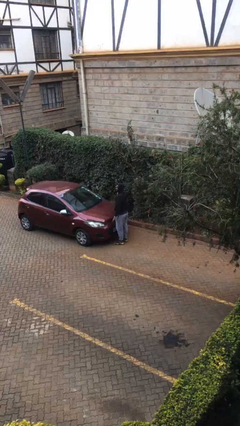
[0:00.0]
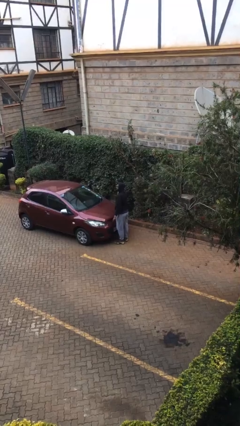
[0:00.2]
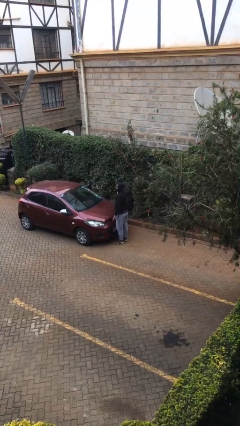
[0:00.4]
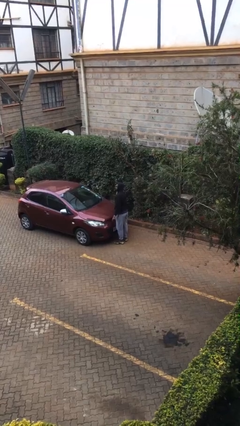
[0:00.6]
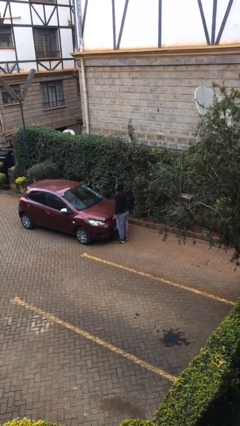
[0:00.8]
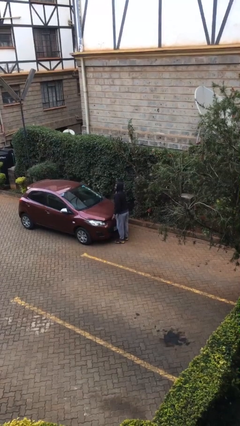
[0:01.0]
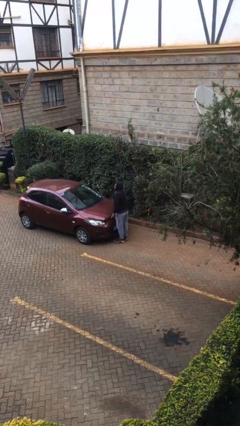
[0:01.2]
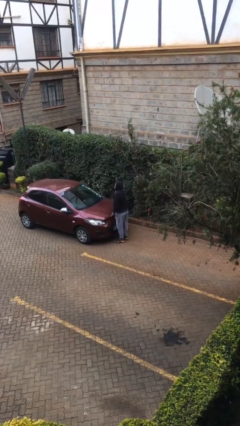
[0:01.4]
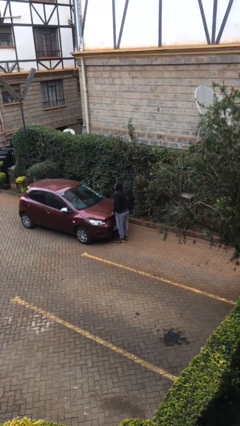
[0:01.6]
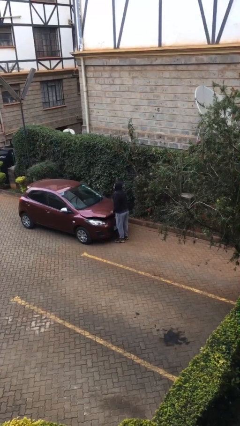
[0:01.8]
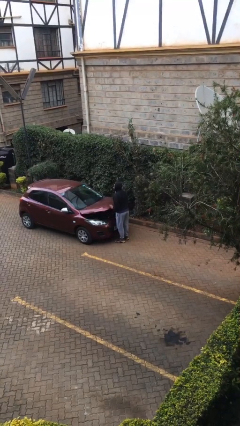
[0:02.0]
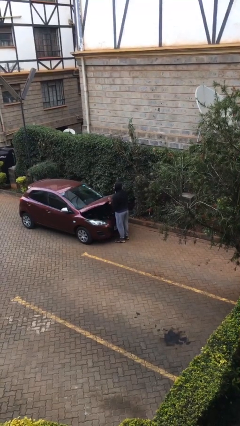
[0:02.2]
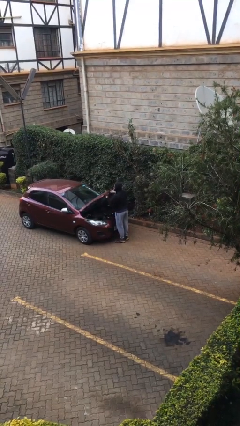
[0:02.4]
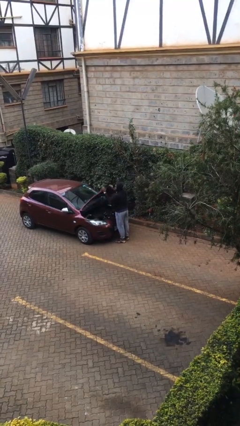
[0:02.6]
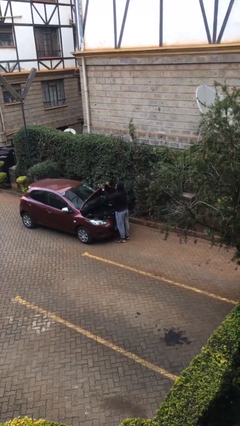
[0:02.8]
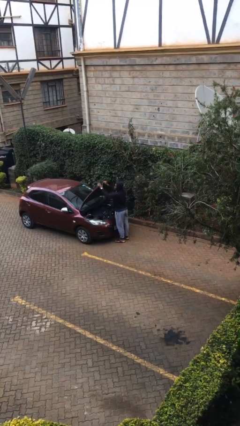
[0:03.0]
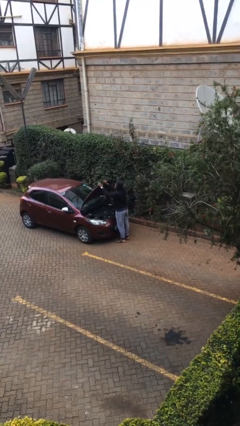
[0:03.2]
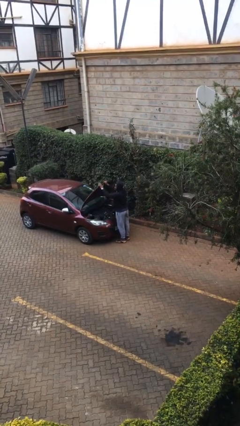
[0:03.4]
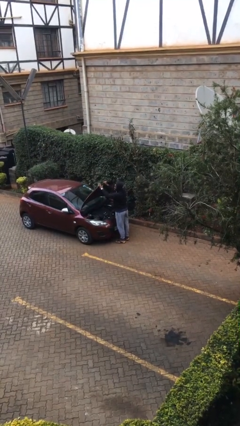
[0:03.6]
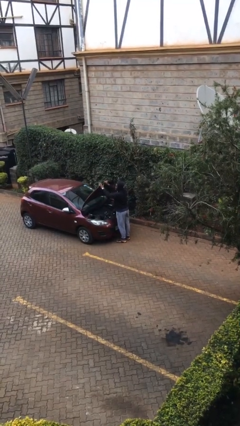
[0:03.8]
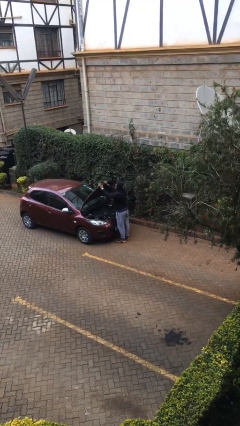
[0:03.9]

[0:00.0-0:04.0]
person opens car hood

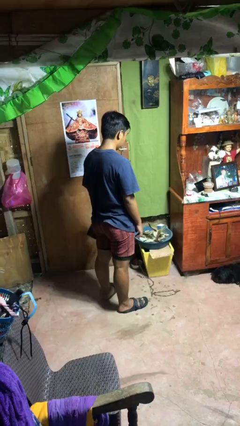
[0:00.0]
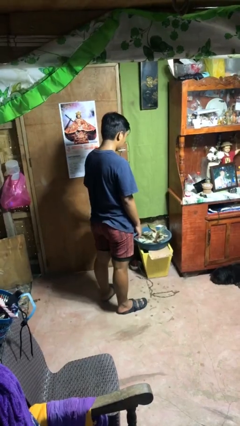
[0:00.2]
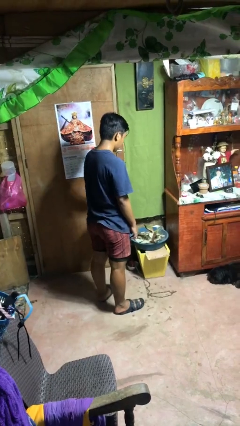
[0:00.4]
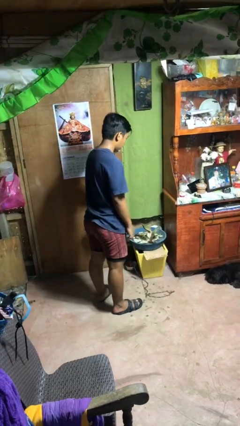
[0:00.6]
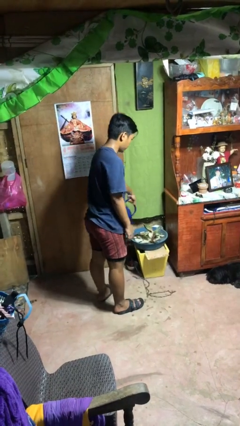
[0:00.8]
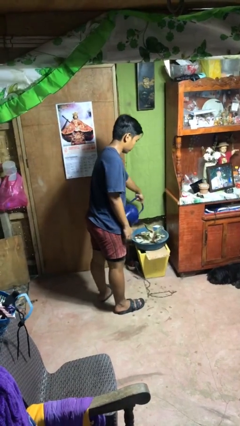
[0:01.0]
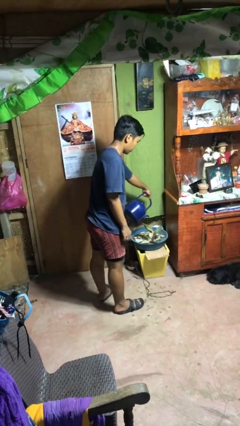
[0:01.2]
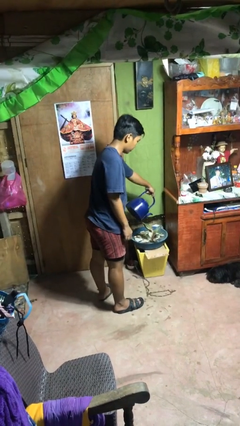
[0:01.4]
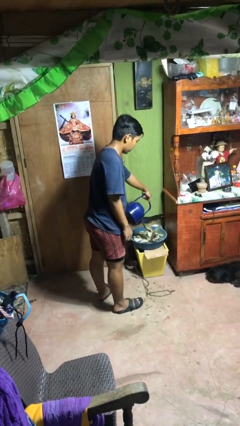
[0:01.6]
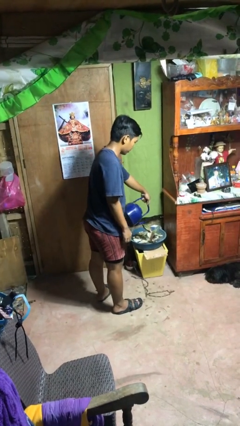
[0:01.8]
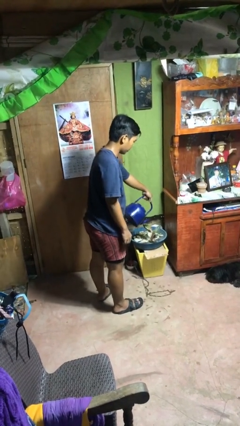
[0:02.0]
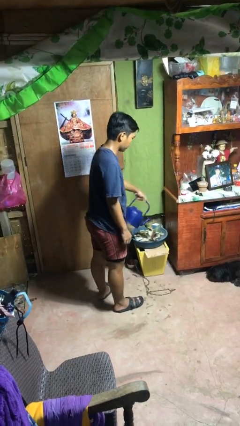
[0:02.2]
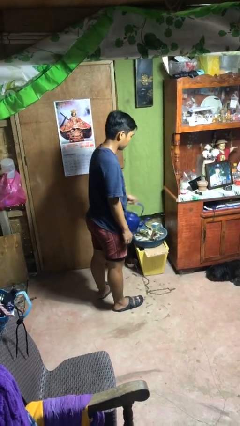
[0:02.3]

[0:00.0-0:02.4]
person waters houseplant

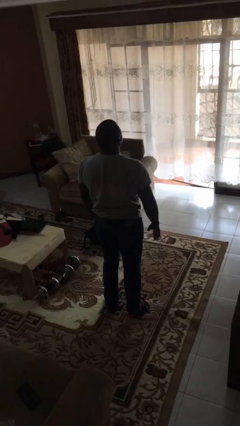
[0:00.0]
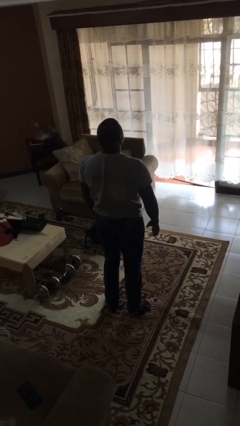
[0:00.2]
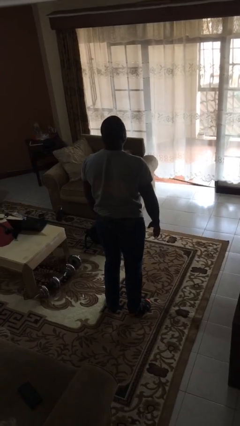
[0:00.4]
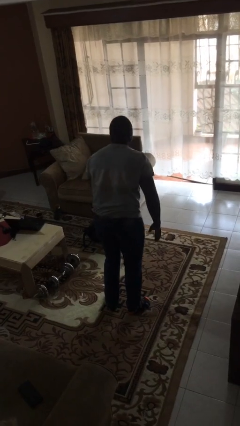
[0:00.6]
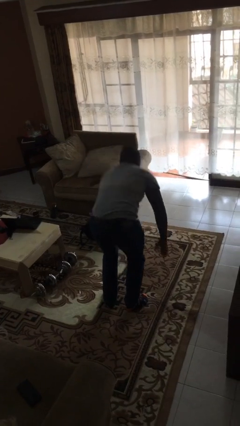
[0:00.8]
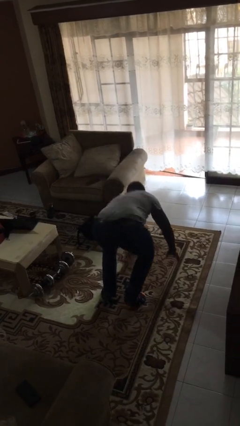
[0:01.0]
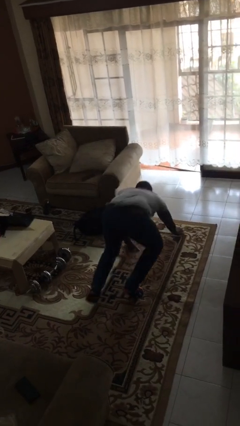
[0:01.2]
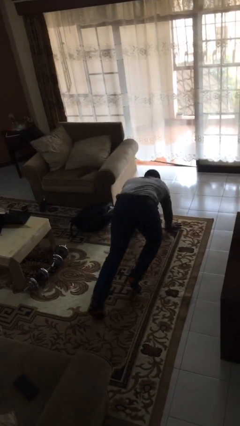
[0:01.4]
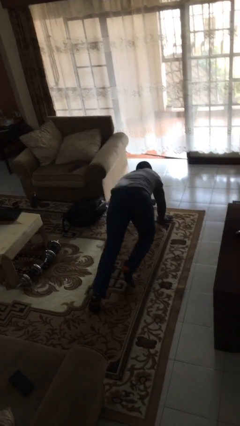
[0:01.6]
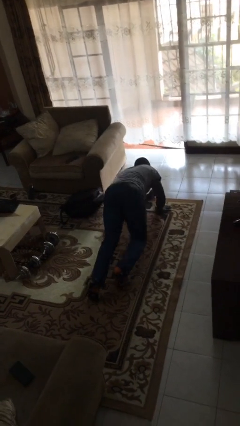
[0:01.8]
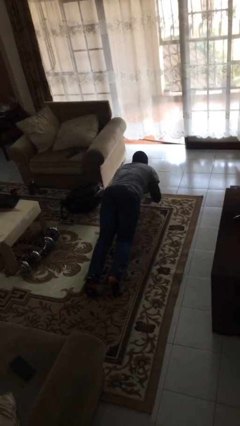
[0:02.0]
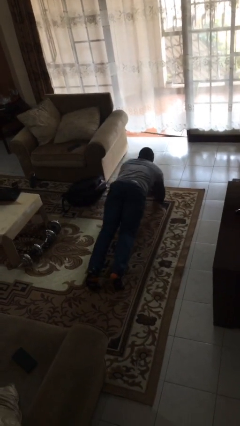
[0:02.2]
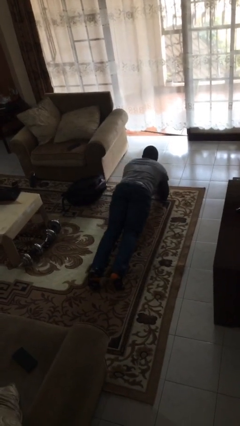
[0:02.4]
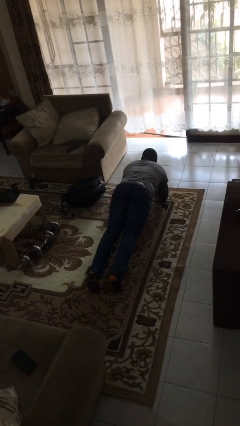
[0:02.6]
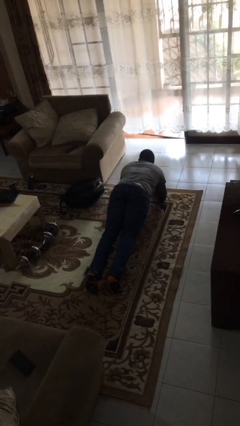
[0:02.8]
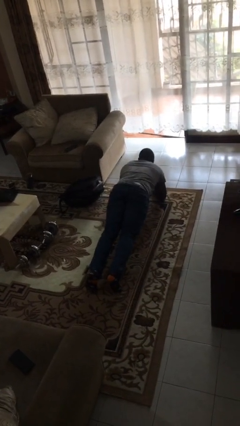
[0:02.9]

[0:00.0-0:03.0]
person exercises with plank

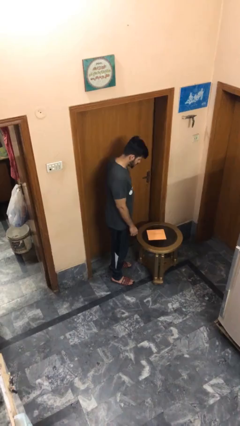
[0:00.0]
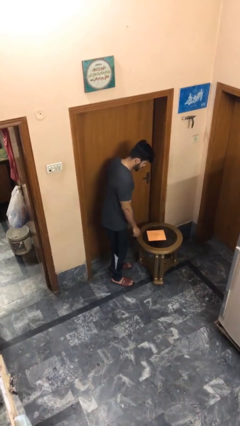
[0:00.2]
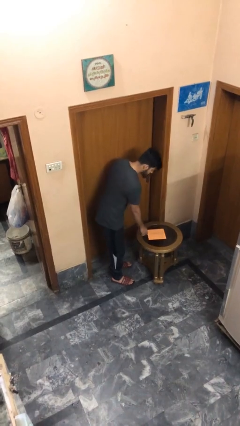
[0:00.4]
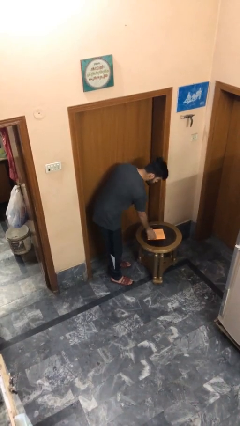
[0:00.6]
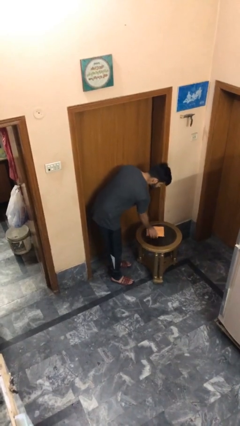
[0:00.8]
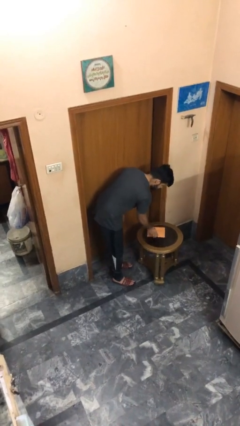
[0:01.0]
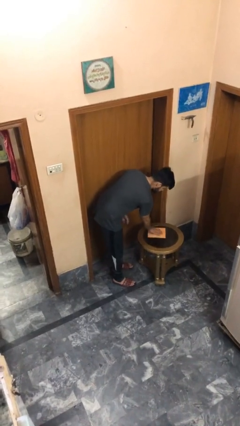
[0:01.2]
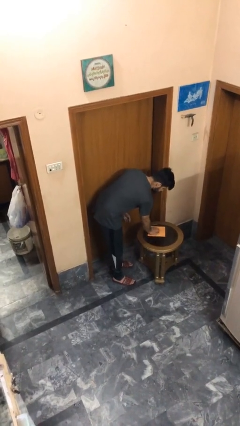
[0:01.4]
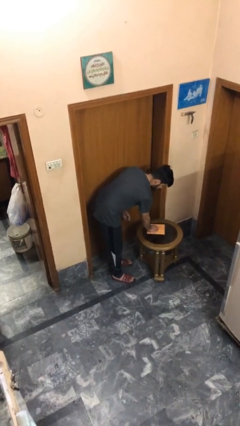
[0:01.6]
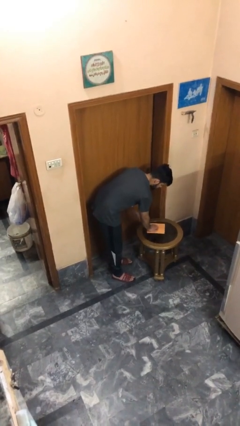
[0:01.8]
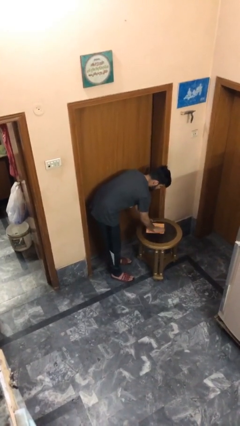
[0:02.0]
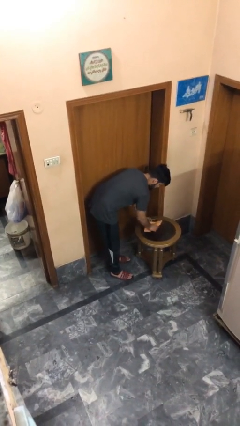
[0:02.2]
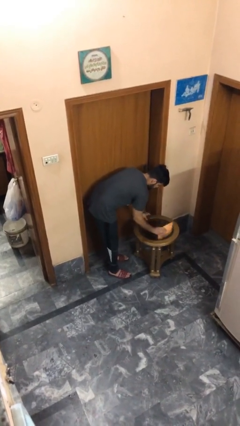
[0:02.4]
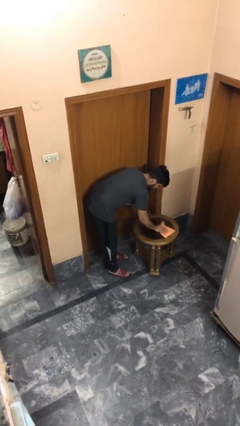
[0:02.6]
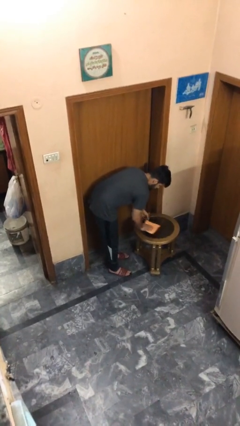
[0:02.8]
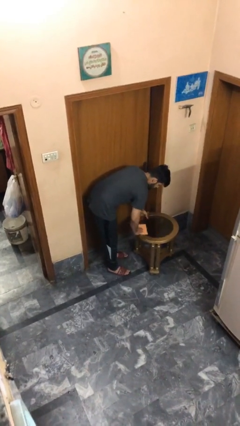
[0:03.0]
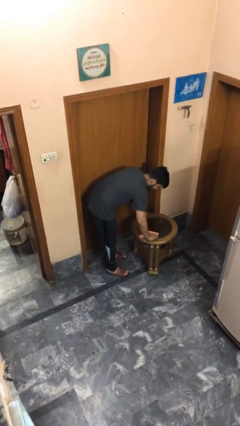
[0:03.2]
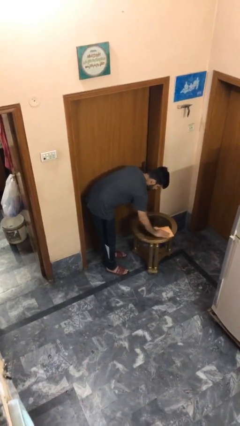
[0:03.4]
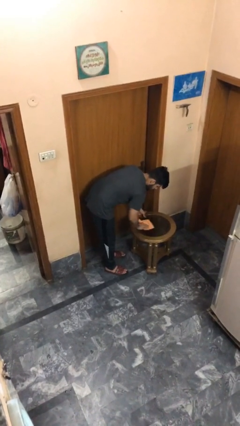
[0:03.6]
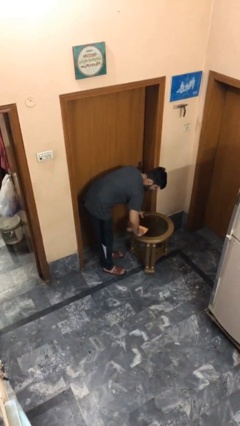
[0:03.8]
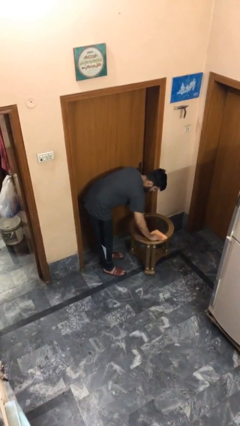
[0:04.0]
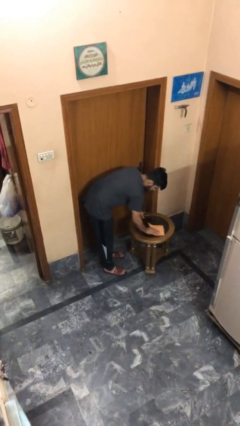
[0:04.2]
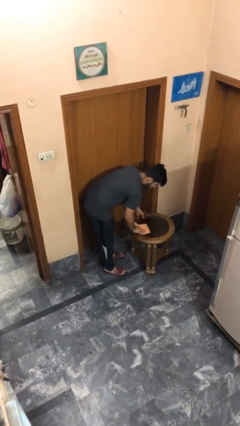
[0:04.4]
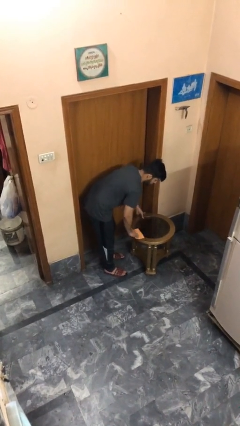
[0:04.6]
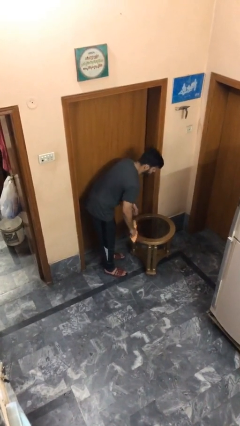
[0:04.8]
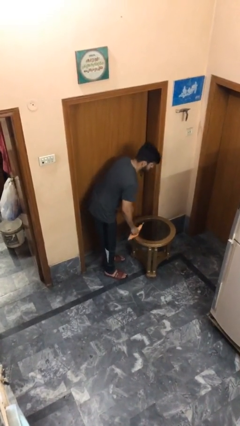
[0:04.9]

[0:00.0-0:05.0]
person cleans table with rag

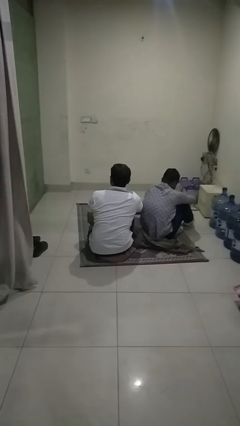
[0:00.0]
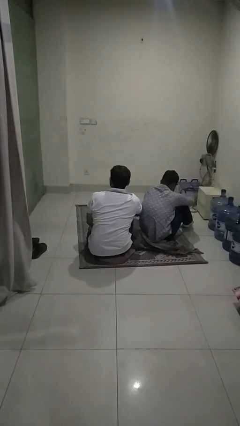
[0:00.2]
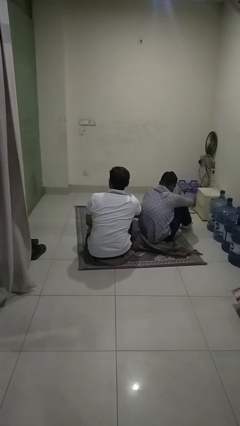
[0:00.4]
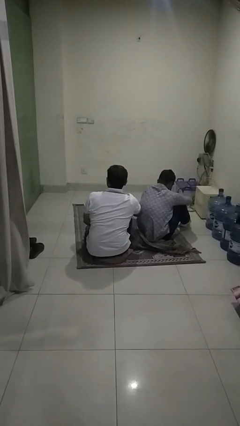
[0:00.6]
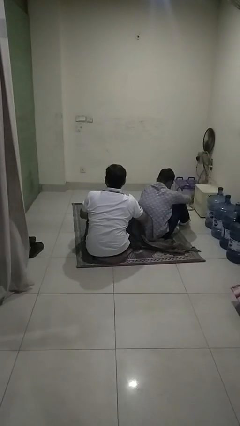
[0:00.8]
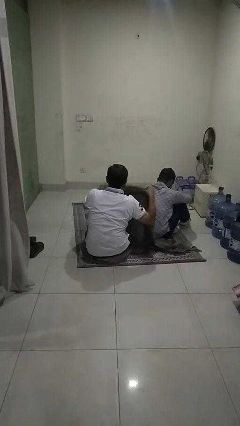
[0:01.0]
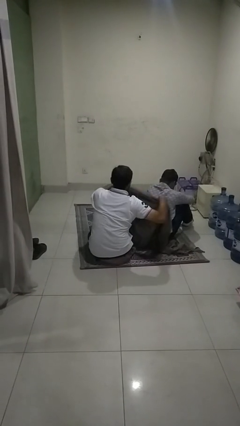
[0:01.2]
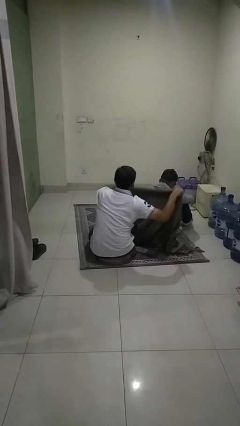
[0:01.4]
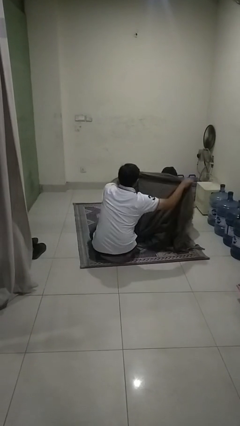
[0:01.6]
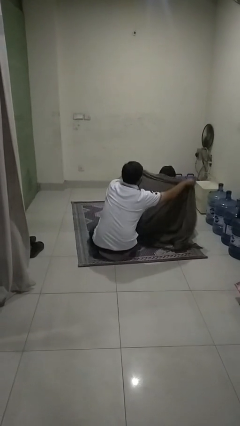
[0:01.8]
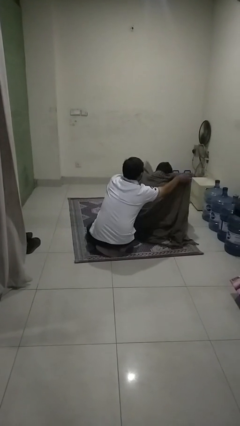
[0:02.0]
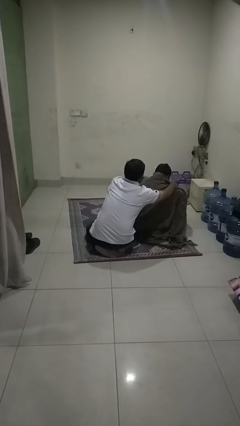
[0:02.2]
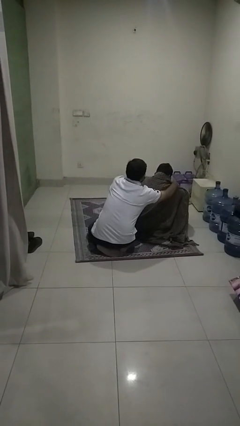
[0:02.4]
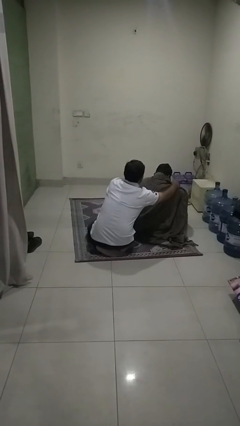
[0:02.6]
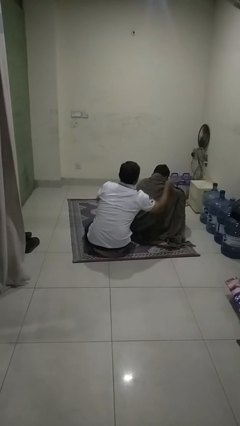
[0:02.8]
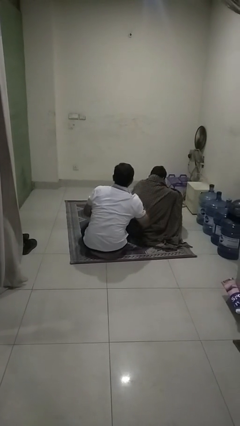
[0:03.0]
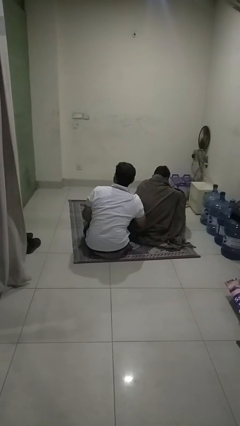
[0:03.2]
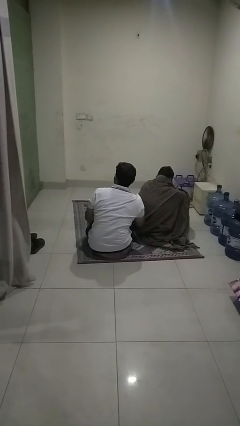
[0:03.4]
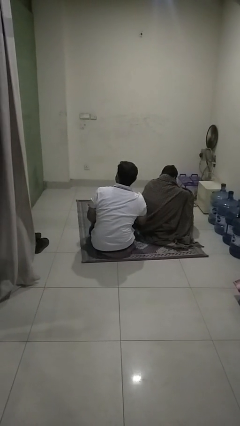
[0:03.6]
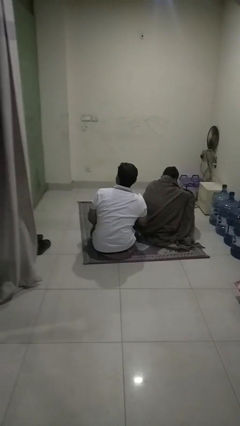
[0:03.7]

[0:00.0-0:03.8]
person covers friend with blanket
